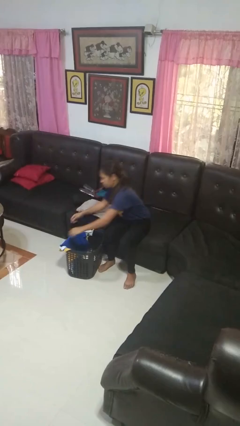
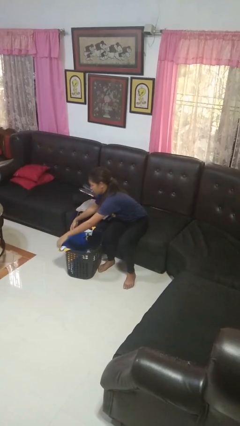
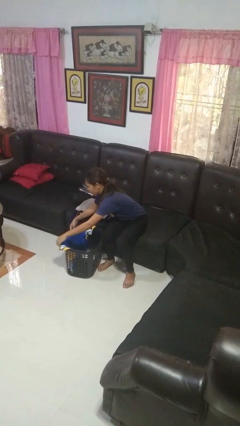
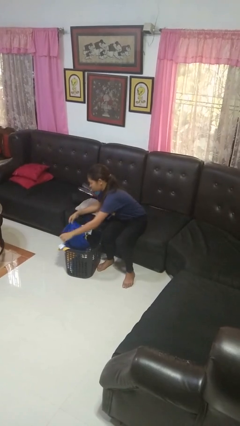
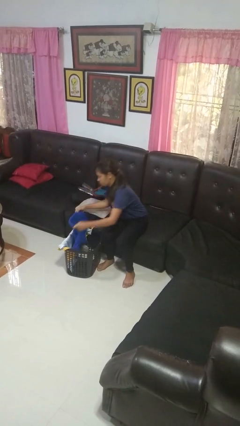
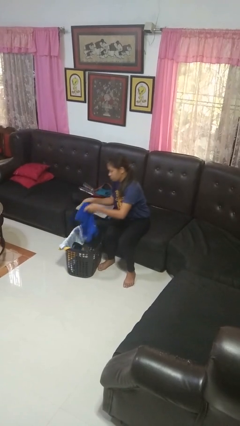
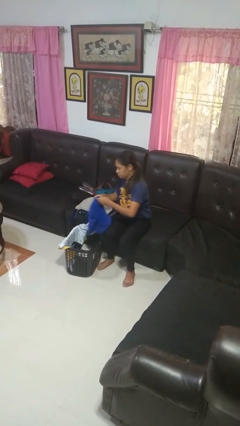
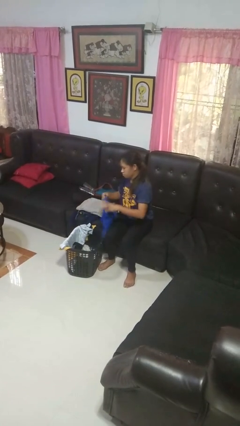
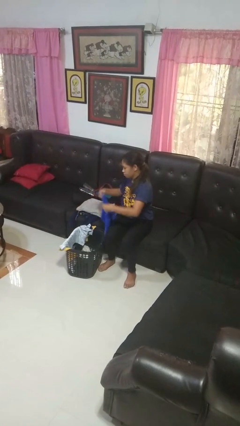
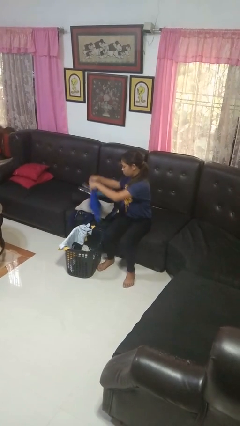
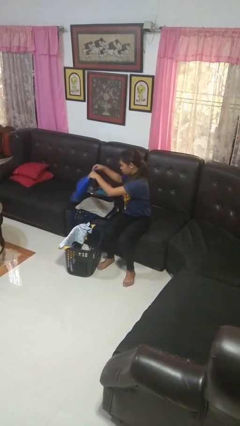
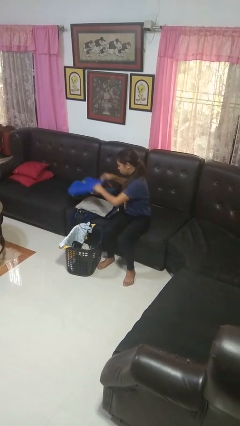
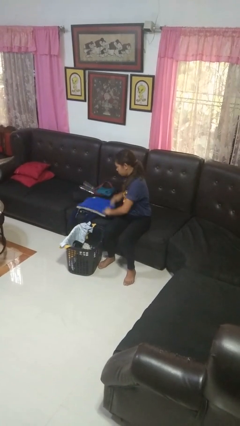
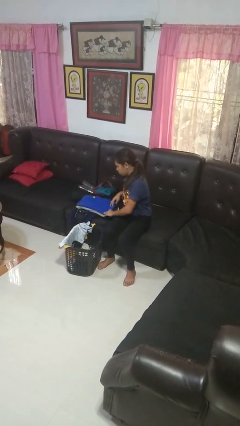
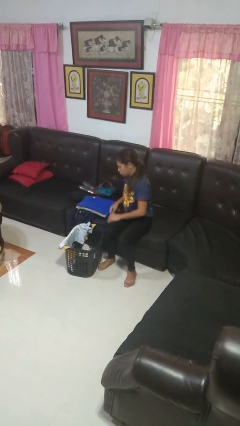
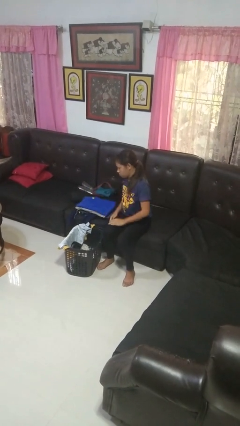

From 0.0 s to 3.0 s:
person folds shirt

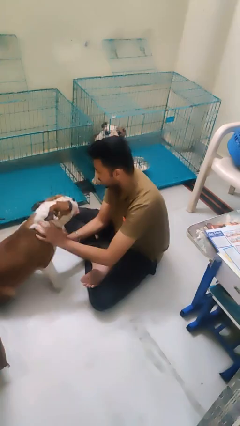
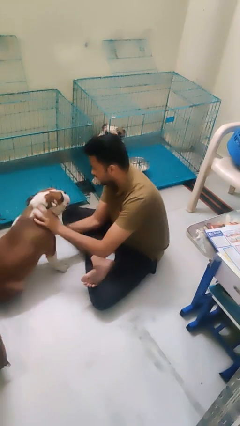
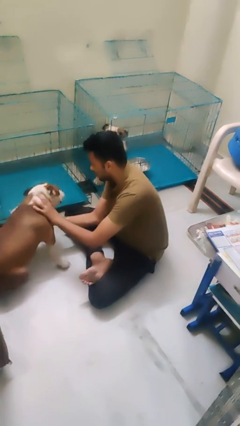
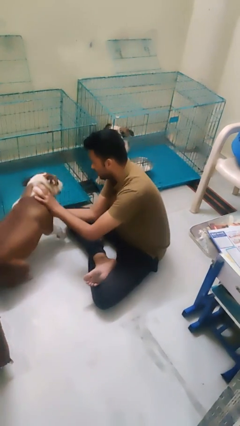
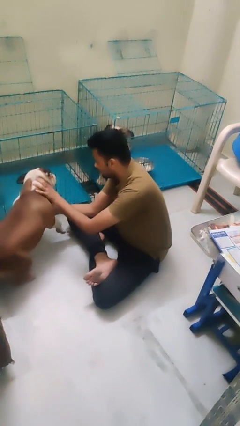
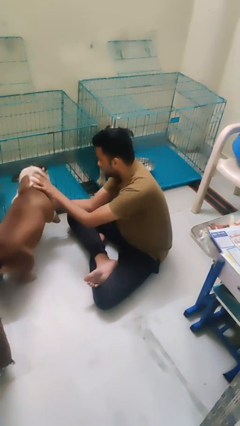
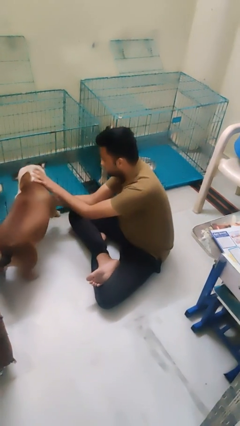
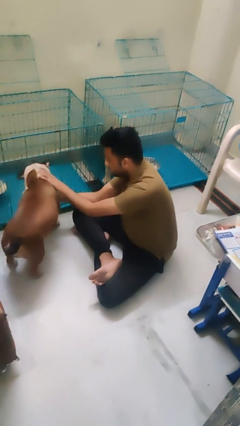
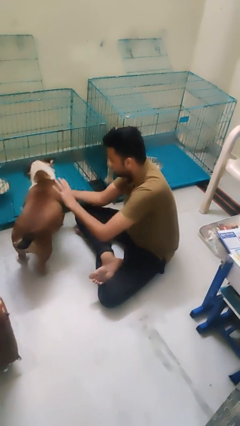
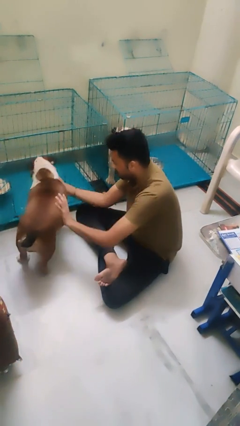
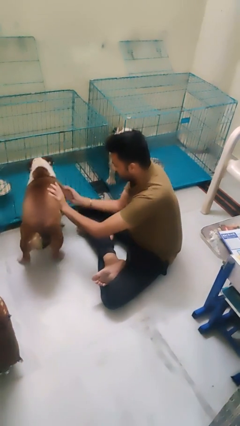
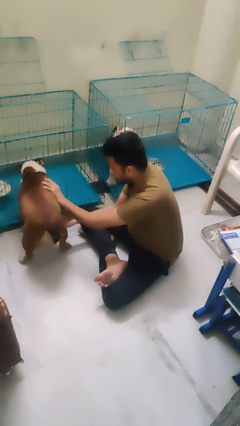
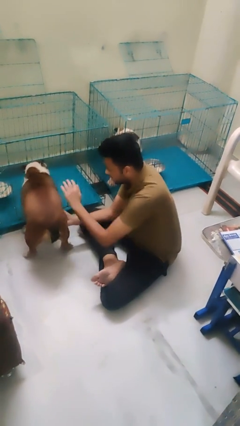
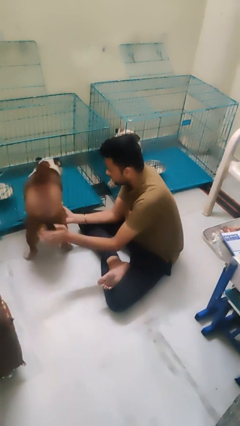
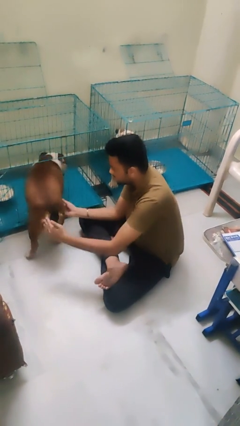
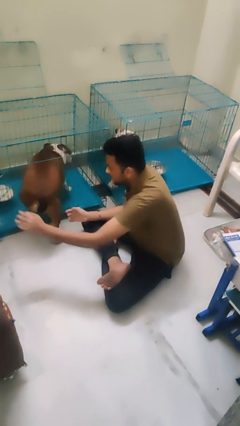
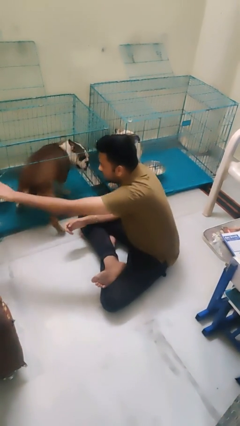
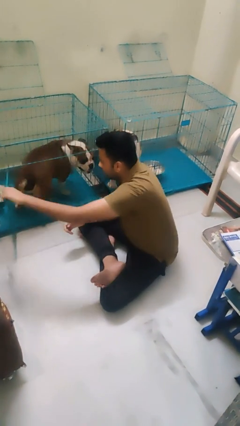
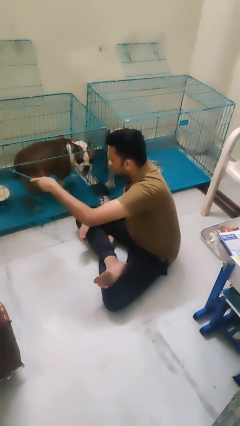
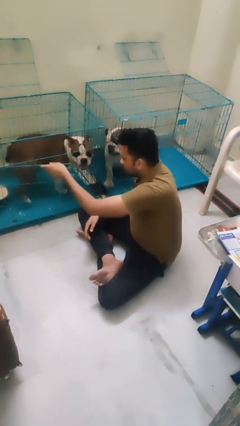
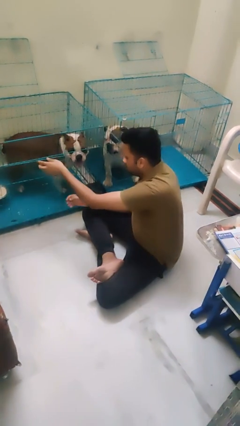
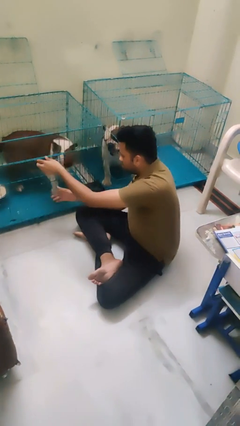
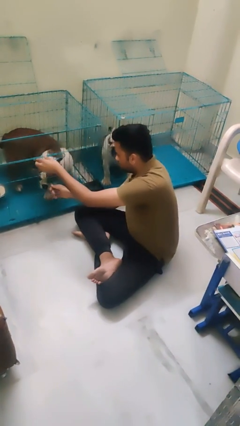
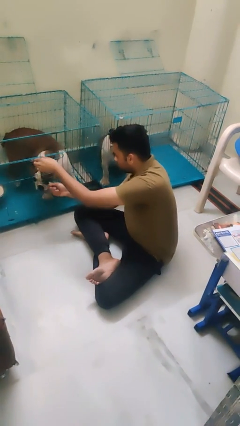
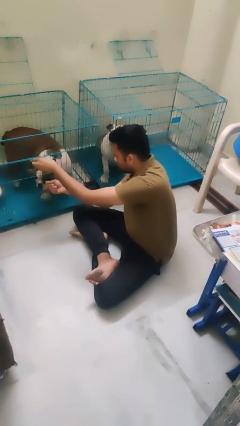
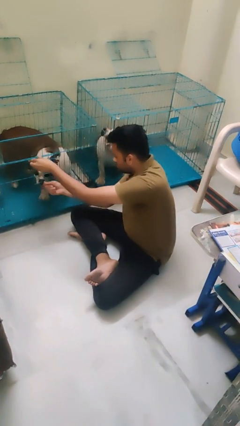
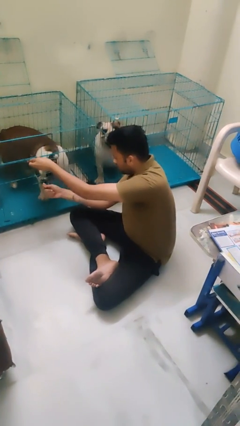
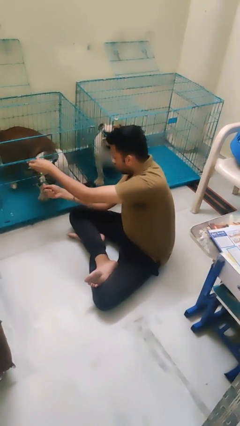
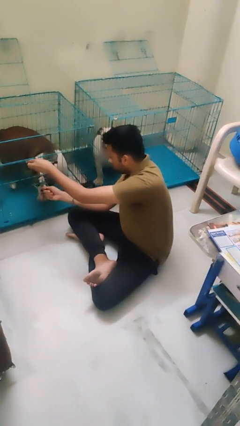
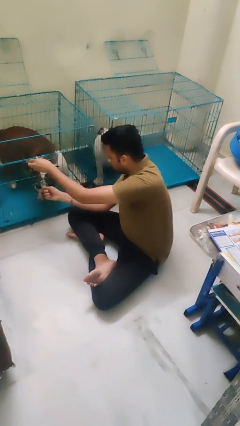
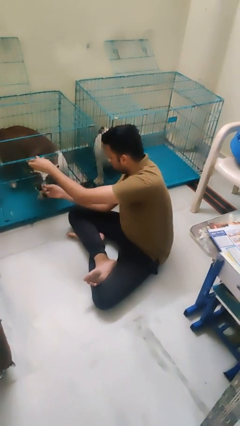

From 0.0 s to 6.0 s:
person crates dog

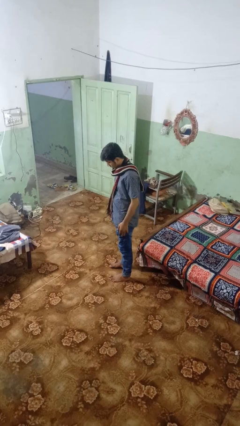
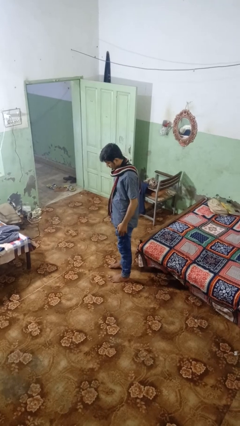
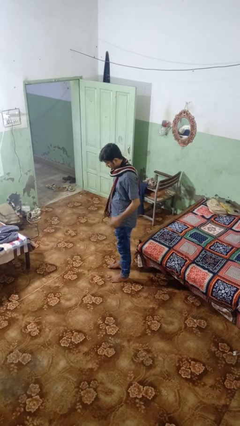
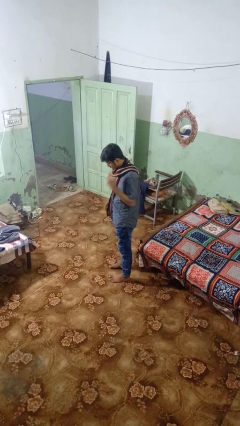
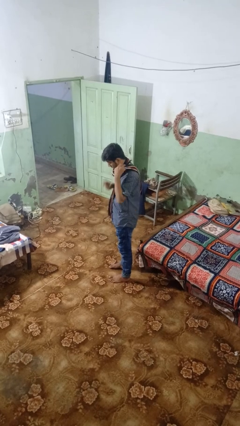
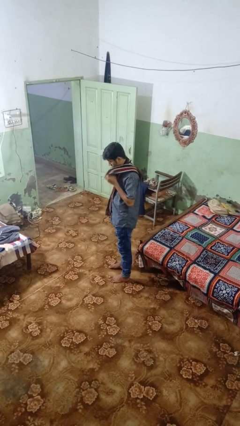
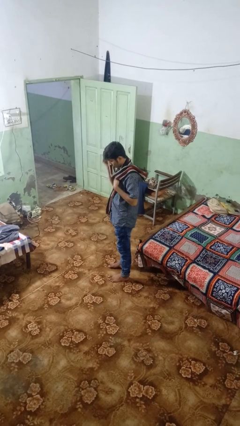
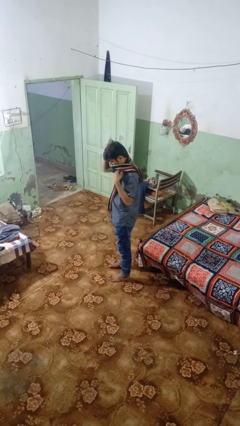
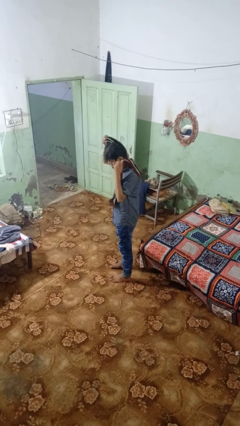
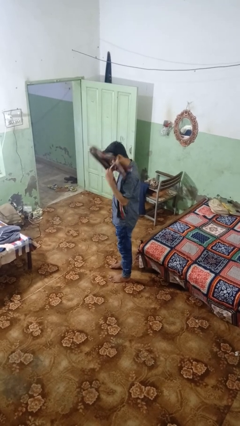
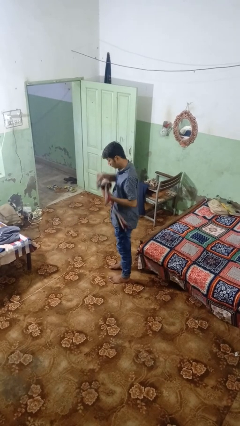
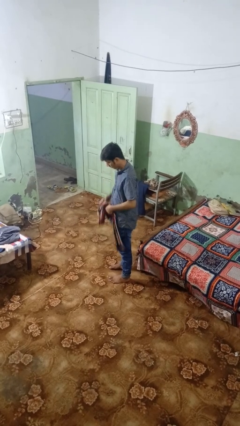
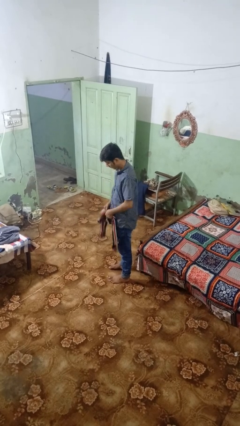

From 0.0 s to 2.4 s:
person takes off scarf

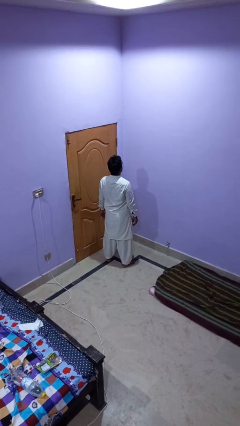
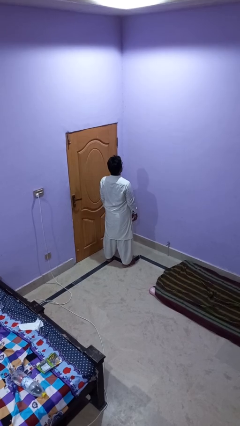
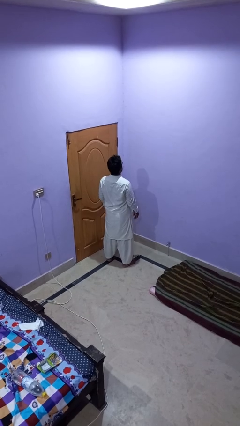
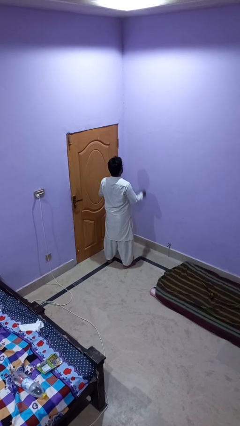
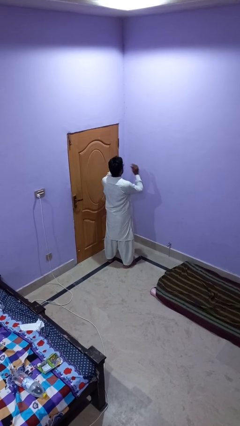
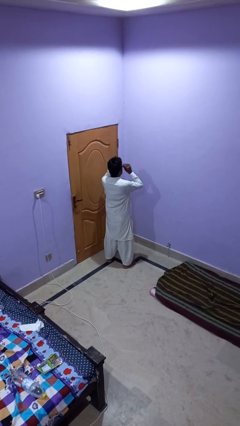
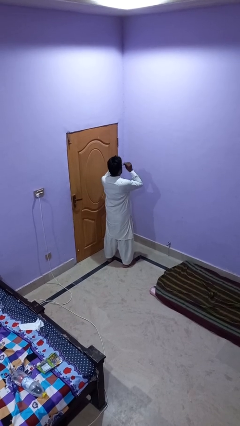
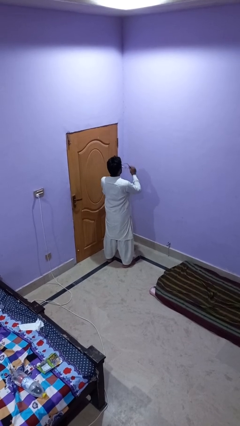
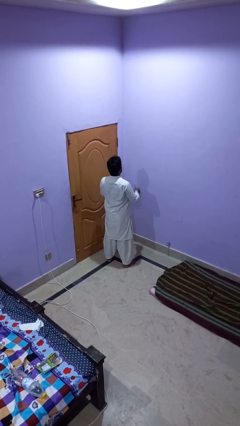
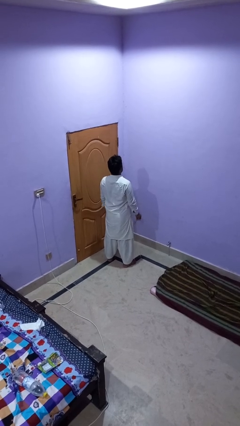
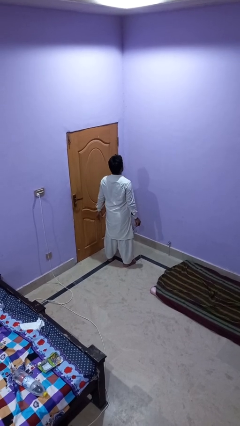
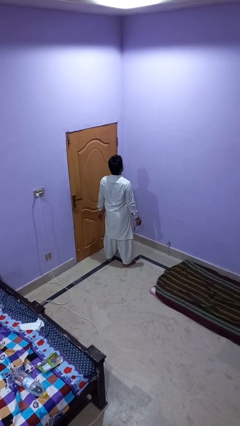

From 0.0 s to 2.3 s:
person takes off glasses

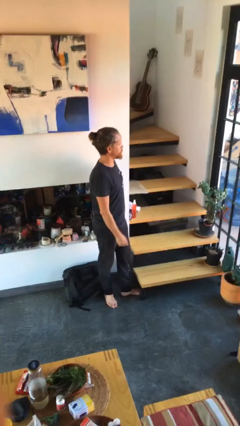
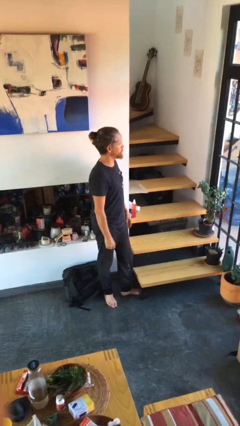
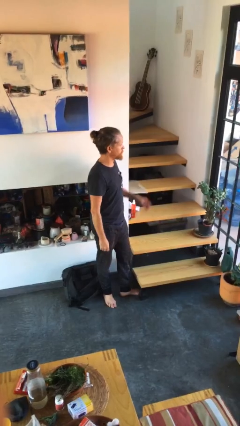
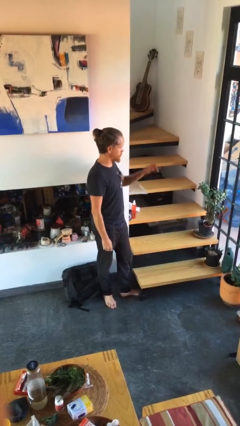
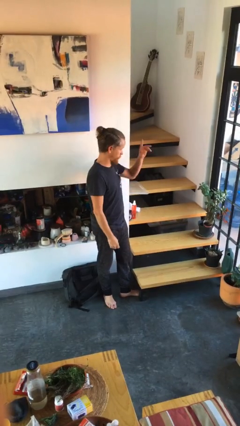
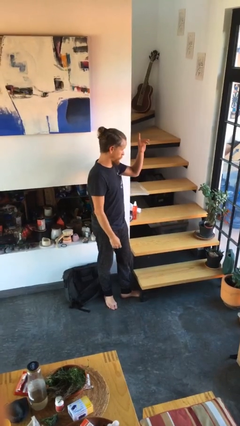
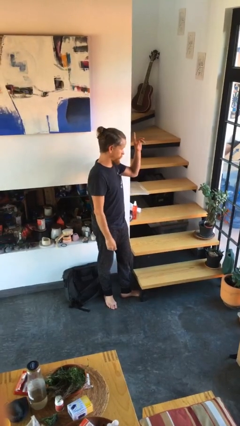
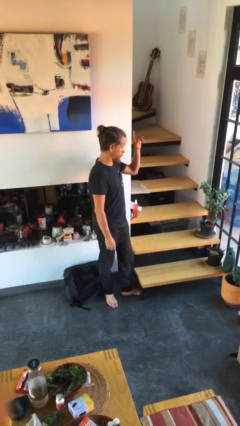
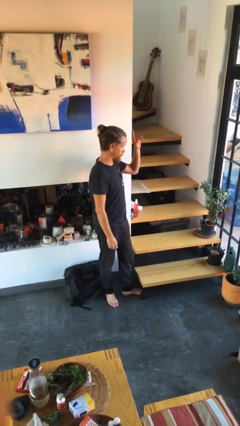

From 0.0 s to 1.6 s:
person gestures raise hand

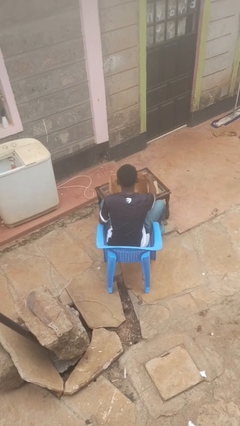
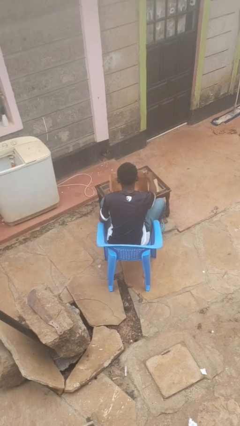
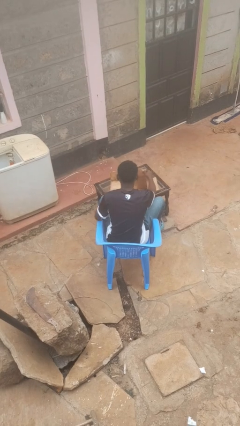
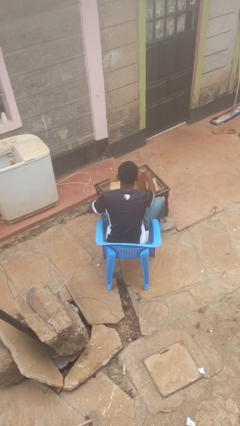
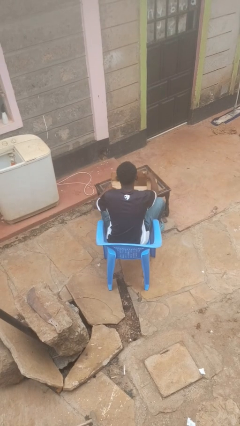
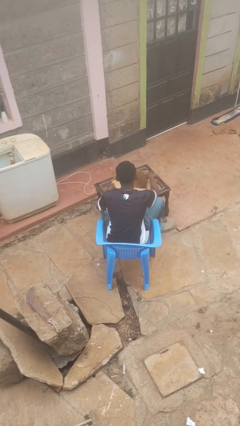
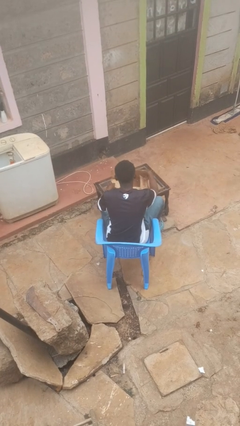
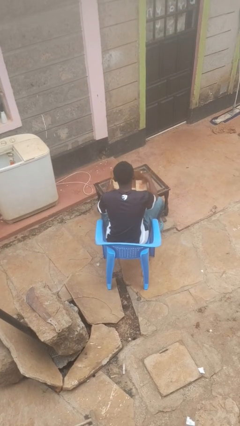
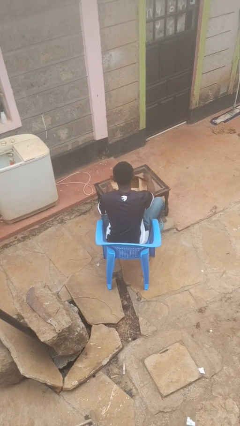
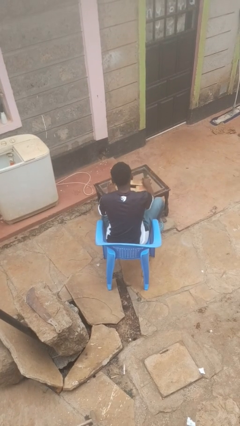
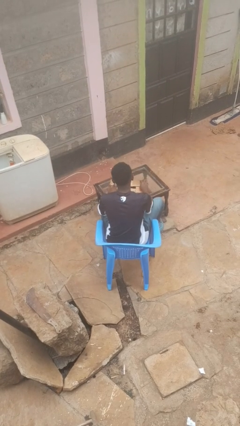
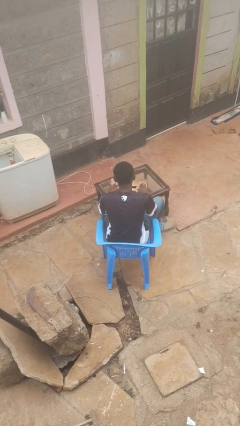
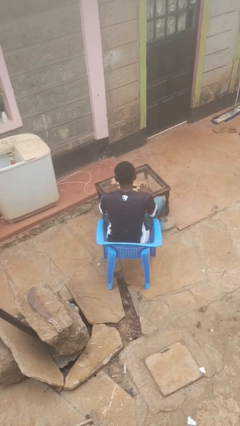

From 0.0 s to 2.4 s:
person closes box
